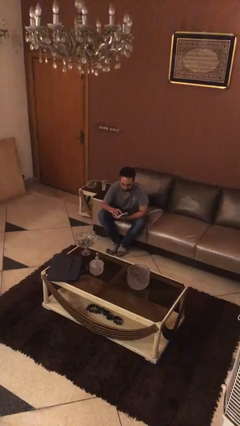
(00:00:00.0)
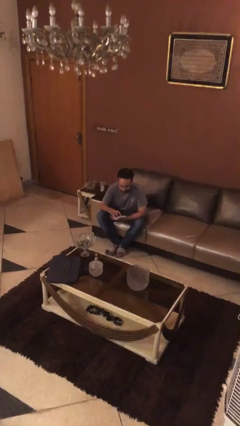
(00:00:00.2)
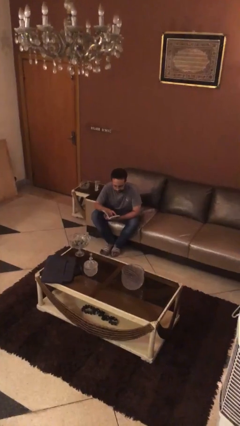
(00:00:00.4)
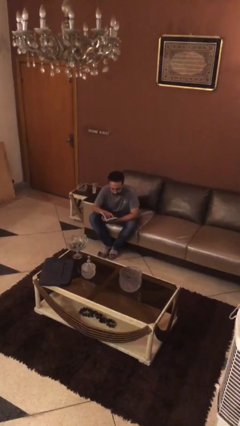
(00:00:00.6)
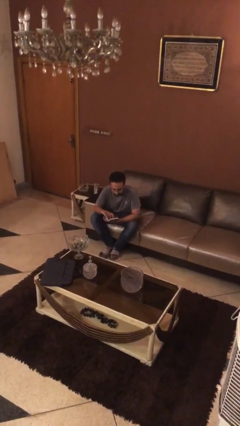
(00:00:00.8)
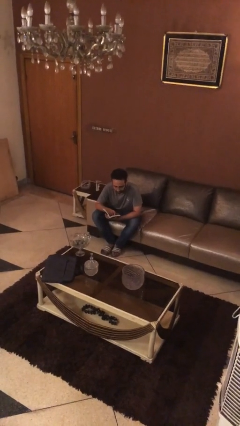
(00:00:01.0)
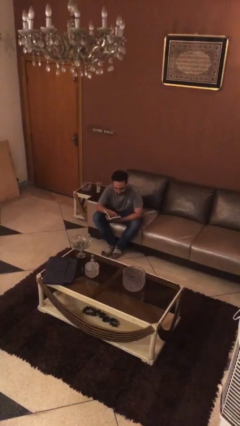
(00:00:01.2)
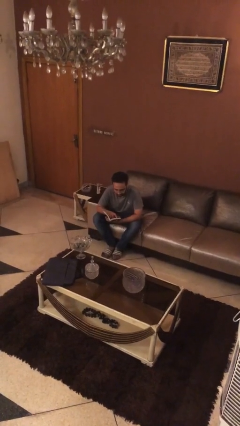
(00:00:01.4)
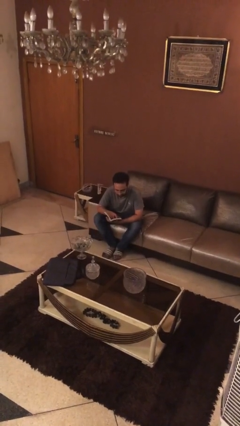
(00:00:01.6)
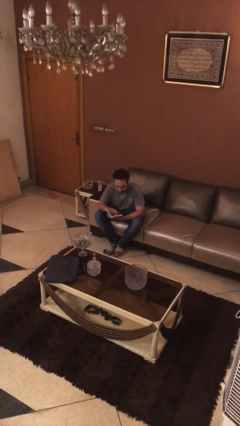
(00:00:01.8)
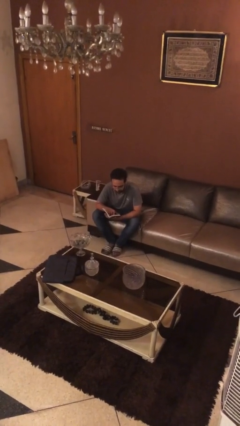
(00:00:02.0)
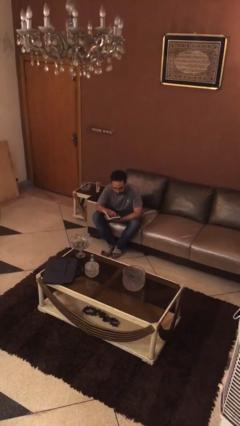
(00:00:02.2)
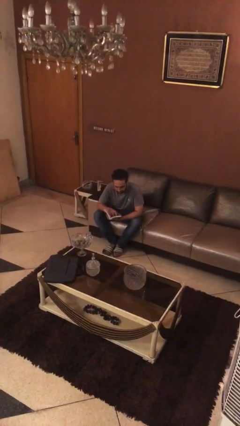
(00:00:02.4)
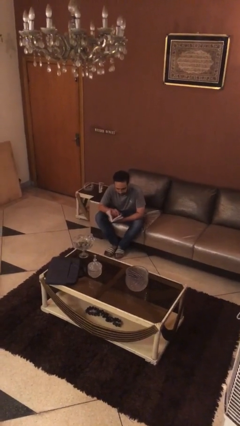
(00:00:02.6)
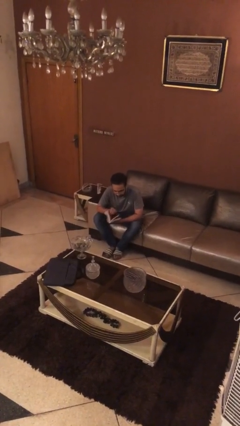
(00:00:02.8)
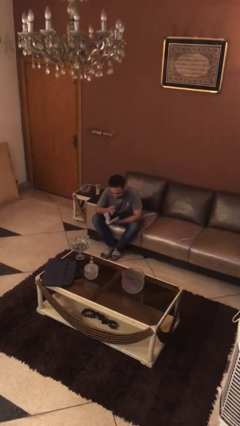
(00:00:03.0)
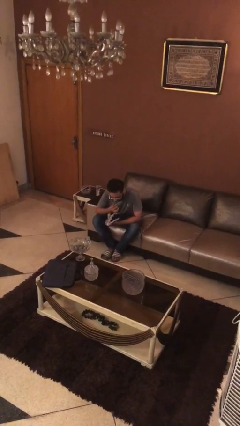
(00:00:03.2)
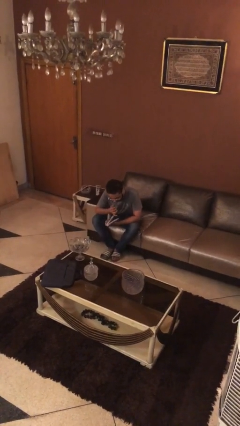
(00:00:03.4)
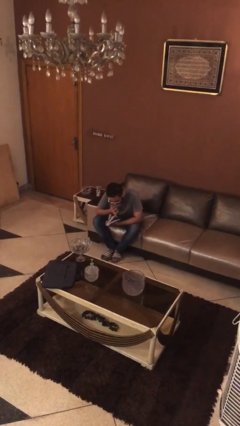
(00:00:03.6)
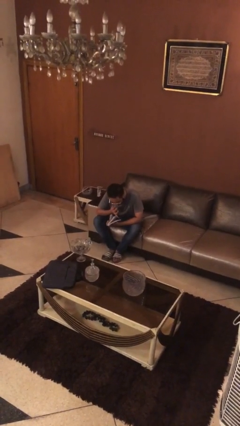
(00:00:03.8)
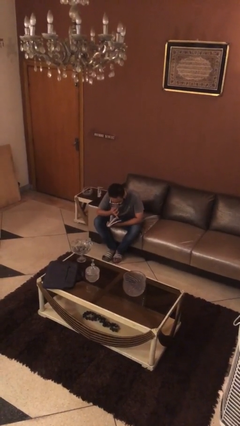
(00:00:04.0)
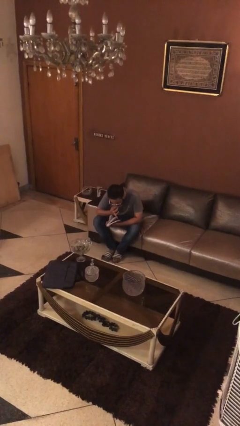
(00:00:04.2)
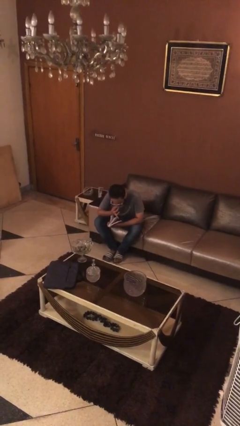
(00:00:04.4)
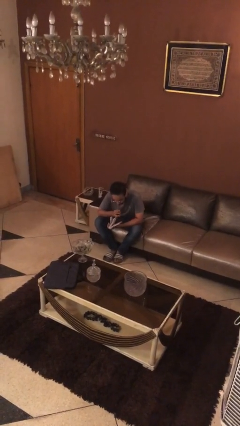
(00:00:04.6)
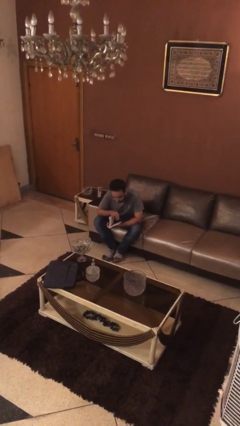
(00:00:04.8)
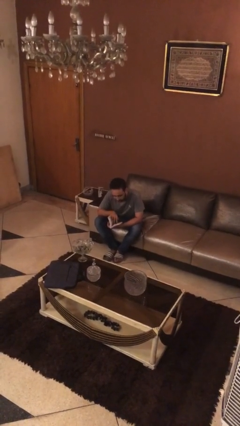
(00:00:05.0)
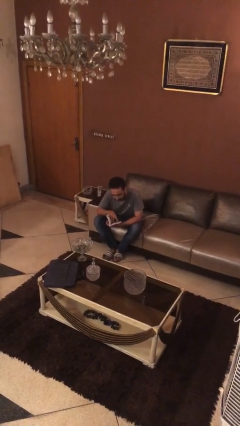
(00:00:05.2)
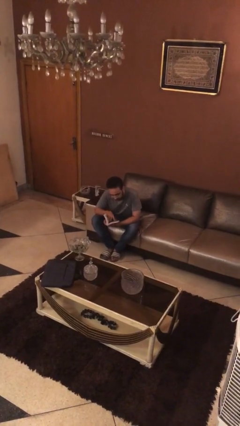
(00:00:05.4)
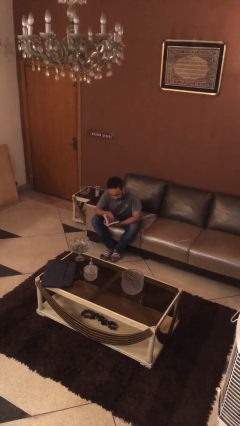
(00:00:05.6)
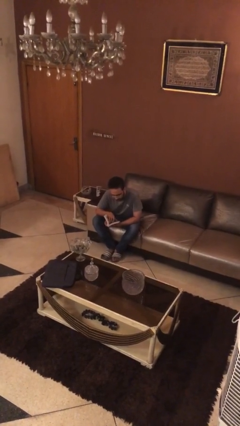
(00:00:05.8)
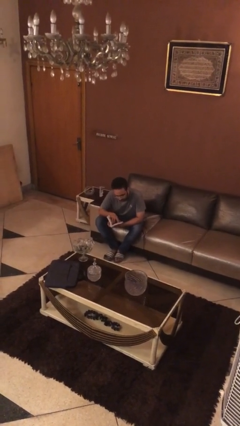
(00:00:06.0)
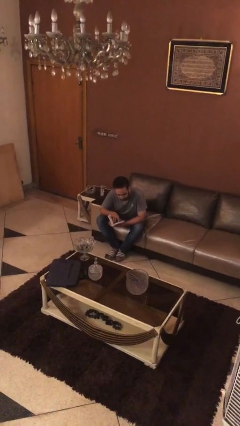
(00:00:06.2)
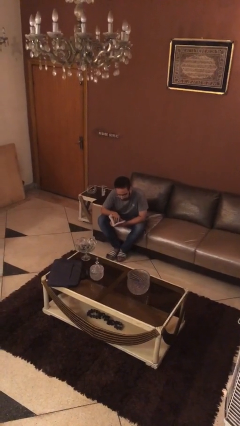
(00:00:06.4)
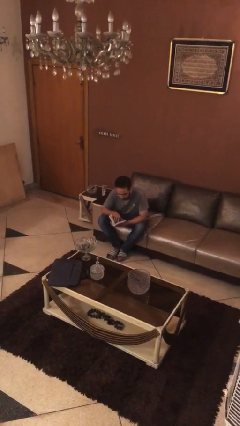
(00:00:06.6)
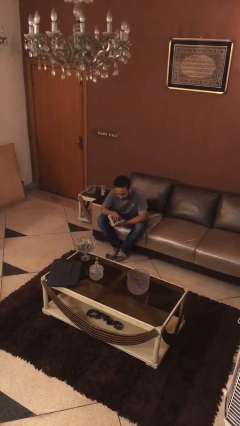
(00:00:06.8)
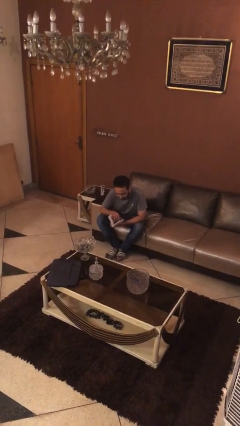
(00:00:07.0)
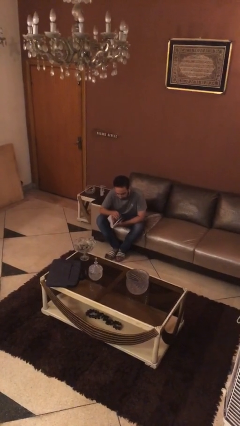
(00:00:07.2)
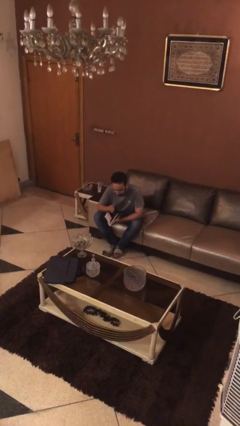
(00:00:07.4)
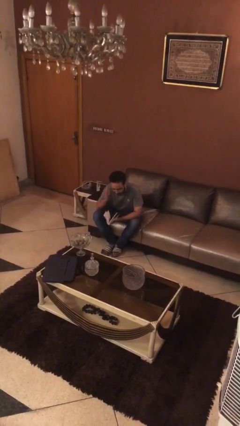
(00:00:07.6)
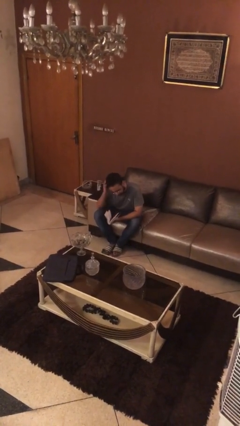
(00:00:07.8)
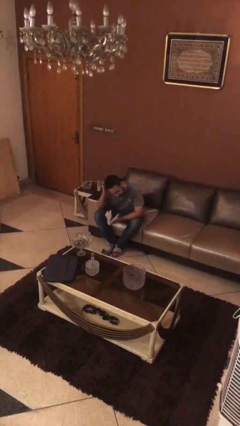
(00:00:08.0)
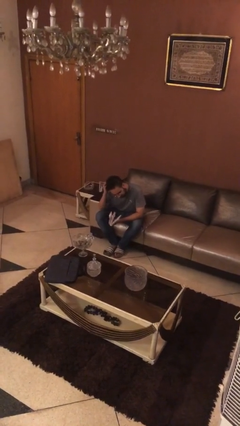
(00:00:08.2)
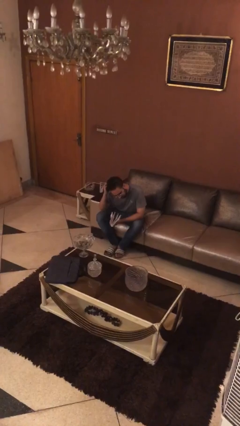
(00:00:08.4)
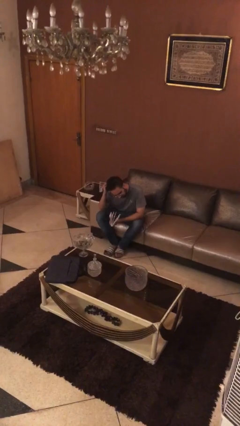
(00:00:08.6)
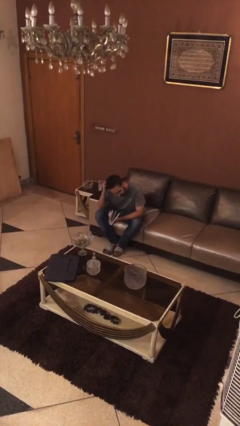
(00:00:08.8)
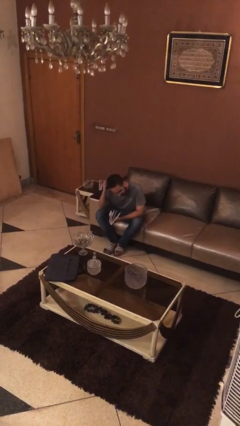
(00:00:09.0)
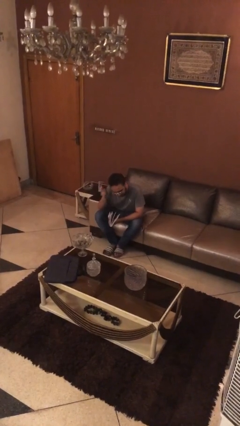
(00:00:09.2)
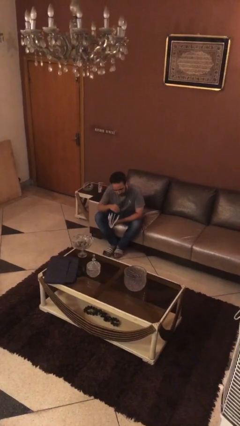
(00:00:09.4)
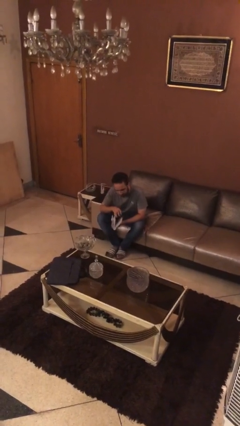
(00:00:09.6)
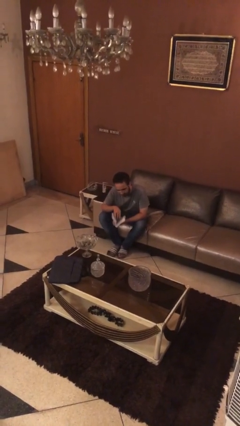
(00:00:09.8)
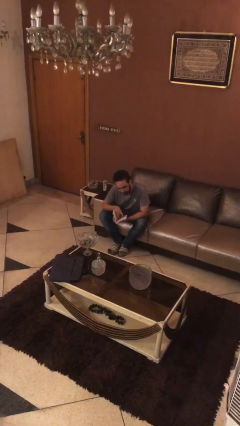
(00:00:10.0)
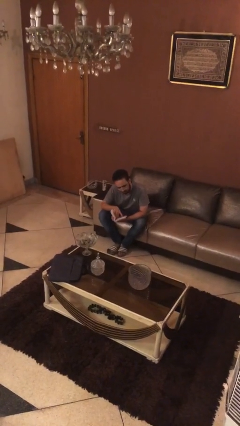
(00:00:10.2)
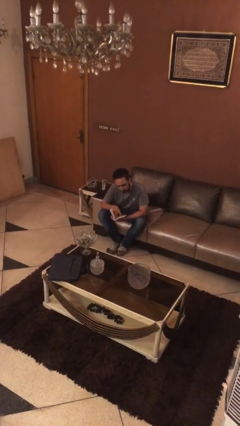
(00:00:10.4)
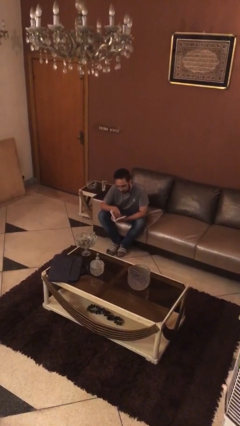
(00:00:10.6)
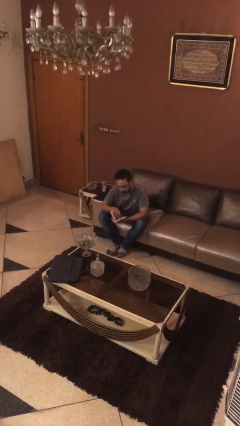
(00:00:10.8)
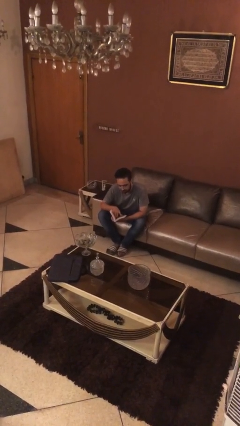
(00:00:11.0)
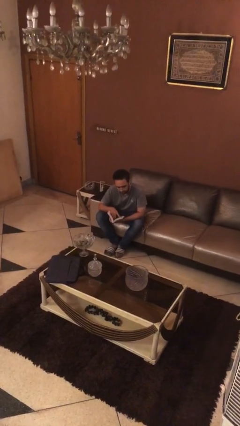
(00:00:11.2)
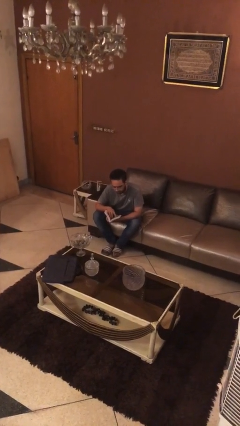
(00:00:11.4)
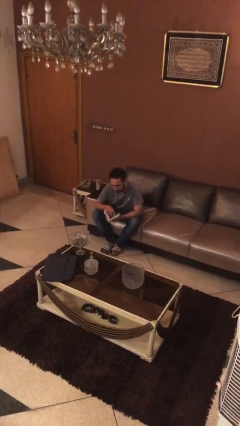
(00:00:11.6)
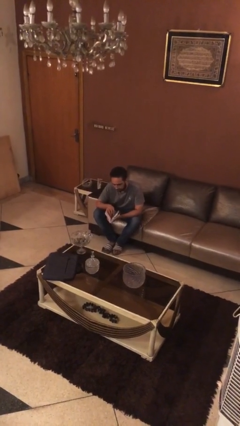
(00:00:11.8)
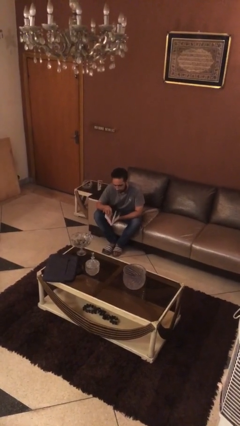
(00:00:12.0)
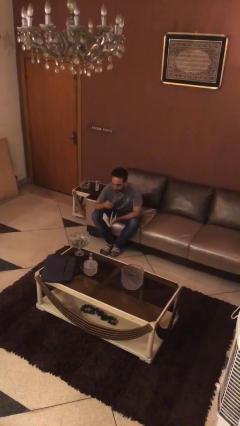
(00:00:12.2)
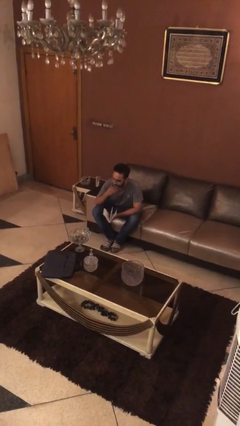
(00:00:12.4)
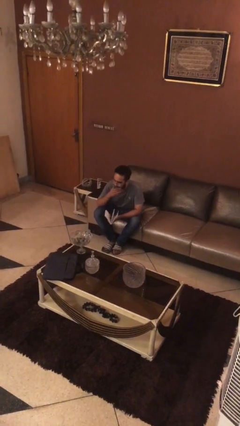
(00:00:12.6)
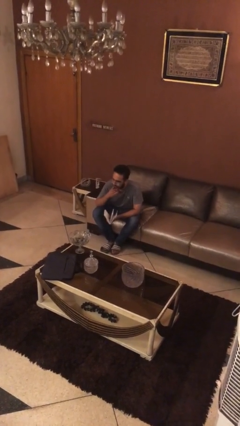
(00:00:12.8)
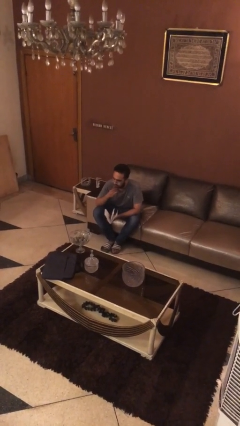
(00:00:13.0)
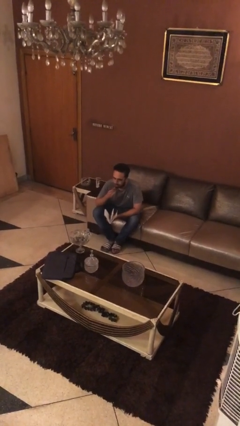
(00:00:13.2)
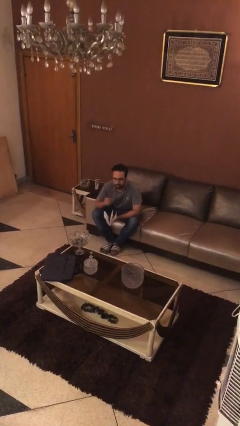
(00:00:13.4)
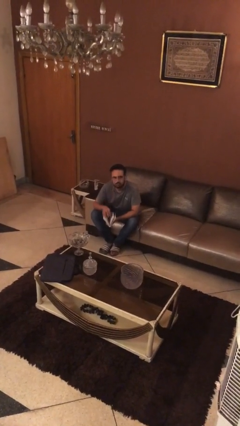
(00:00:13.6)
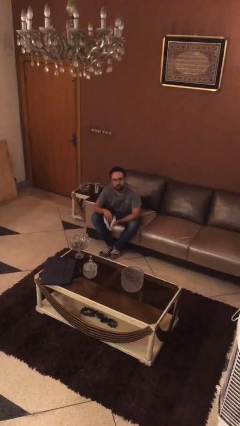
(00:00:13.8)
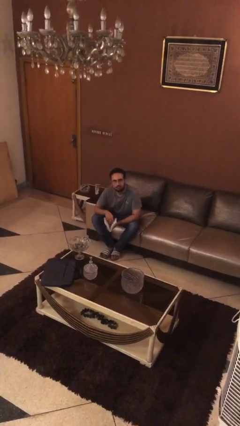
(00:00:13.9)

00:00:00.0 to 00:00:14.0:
person reads document

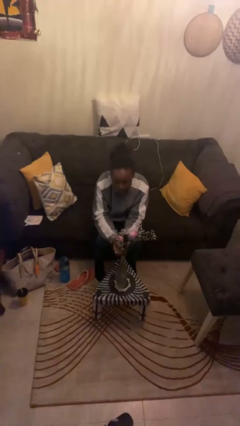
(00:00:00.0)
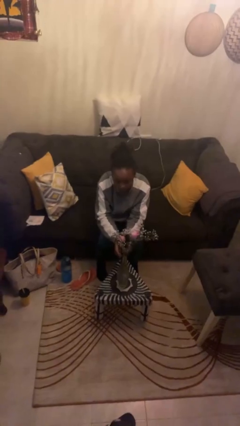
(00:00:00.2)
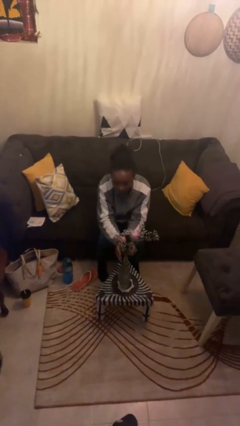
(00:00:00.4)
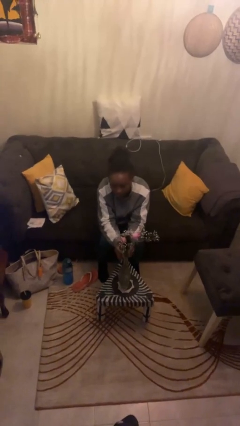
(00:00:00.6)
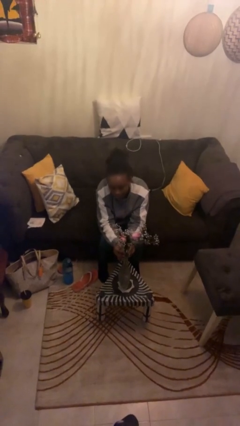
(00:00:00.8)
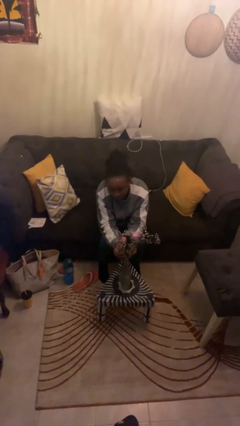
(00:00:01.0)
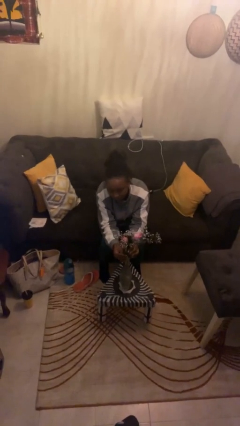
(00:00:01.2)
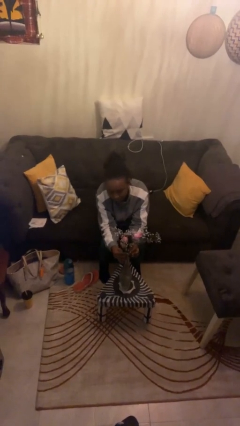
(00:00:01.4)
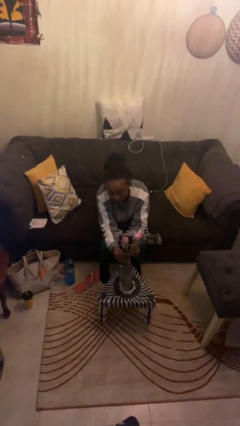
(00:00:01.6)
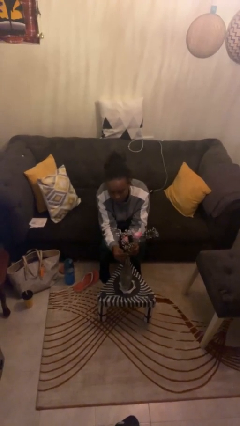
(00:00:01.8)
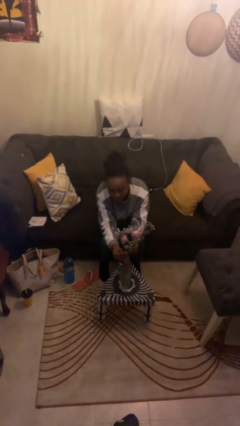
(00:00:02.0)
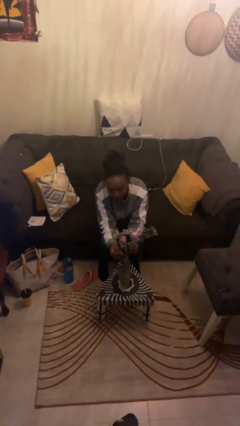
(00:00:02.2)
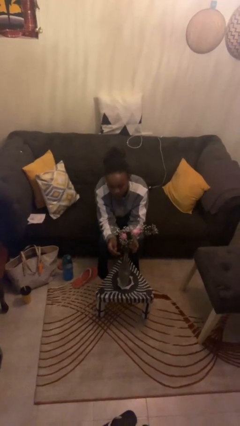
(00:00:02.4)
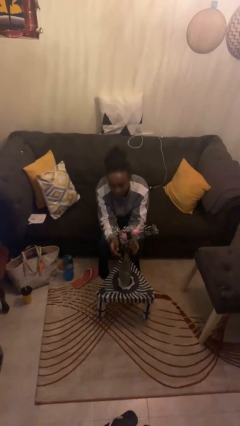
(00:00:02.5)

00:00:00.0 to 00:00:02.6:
person arranges flowers in vase

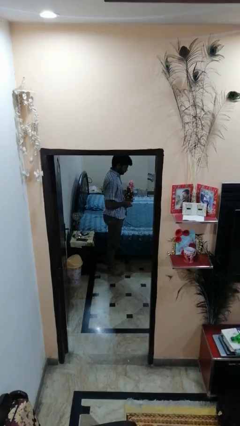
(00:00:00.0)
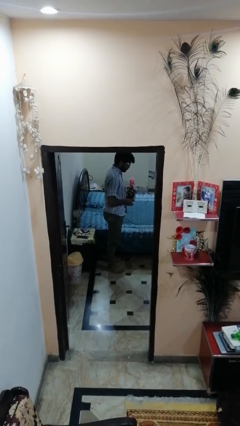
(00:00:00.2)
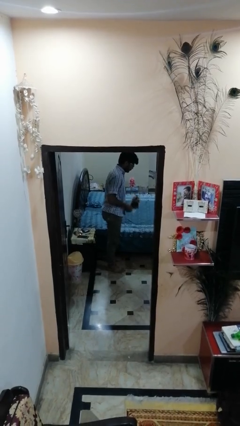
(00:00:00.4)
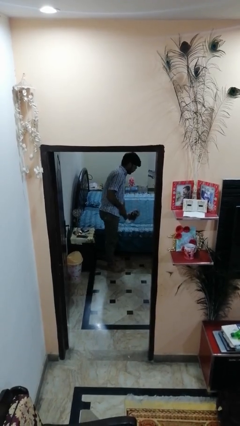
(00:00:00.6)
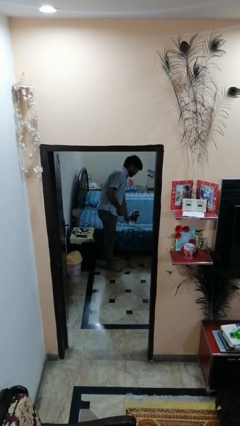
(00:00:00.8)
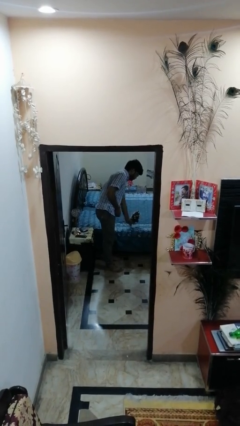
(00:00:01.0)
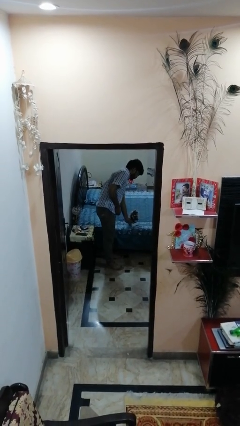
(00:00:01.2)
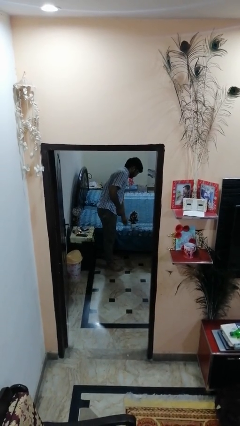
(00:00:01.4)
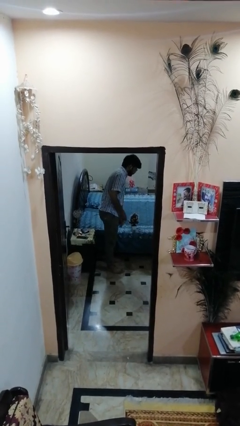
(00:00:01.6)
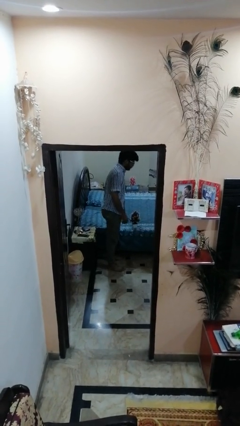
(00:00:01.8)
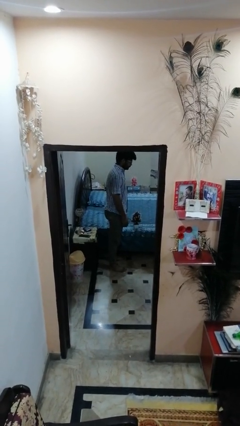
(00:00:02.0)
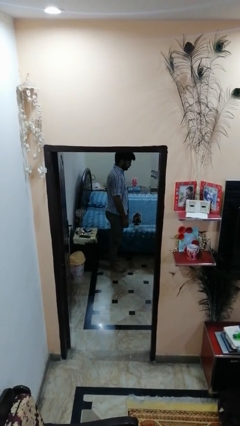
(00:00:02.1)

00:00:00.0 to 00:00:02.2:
person puts down object on bed
